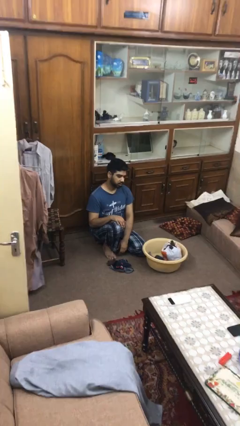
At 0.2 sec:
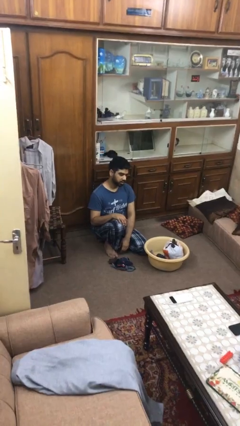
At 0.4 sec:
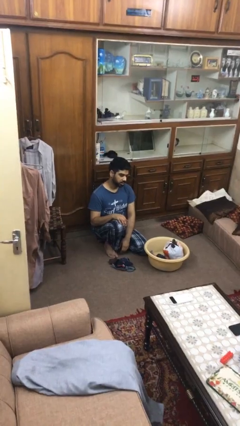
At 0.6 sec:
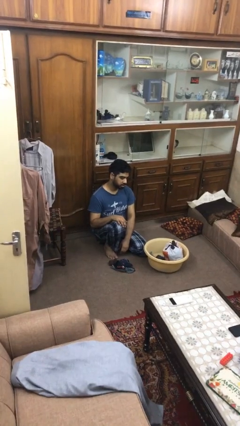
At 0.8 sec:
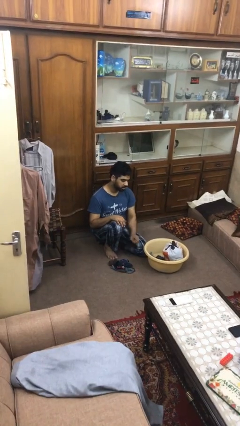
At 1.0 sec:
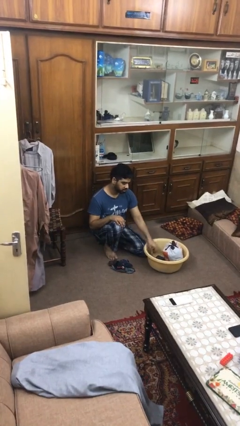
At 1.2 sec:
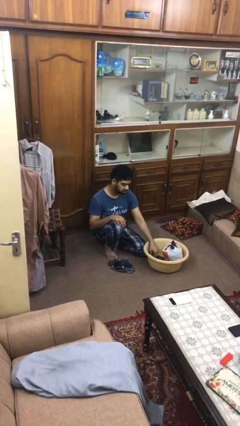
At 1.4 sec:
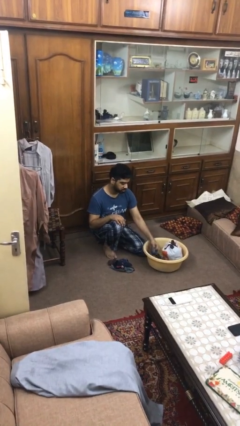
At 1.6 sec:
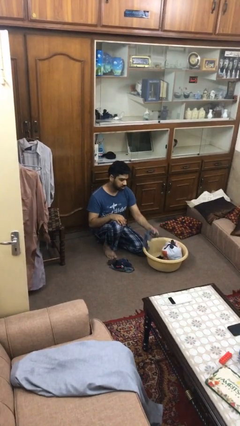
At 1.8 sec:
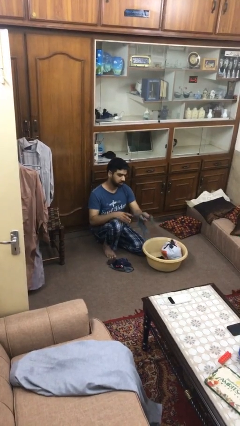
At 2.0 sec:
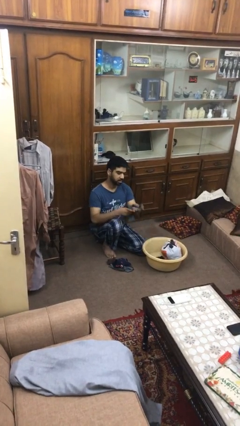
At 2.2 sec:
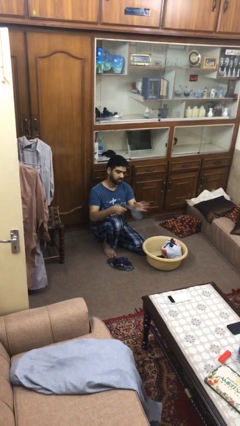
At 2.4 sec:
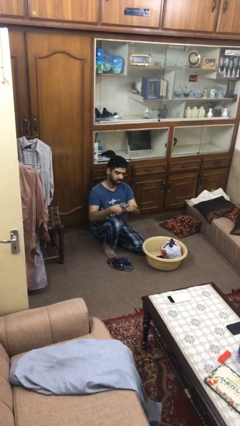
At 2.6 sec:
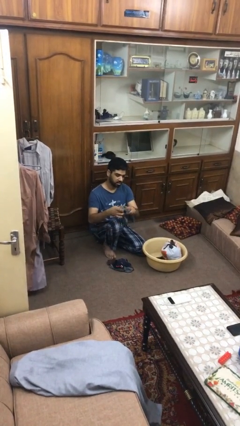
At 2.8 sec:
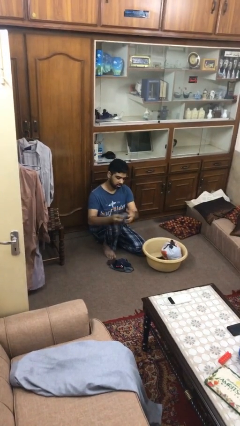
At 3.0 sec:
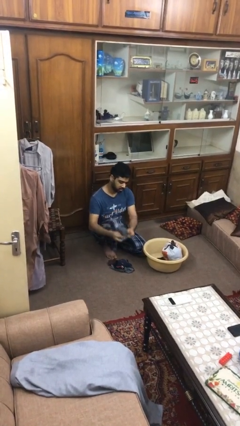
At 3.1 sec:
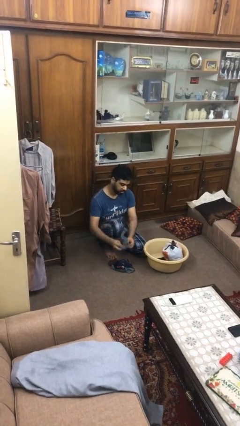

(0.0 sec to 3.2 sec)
person folds socks

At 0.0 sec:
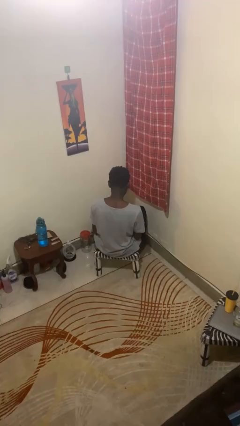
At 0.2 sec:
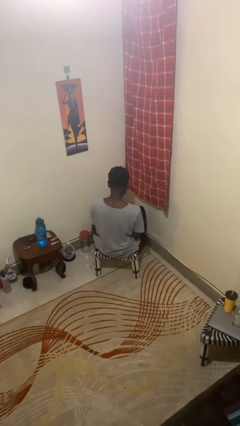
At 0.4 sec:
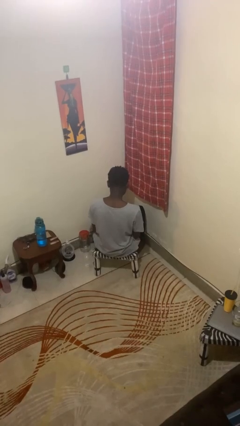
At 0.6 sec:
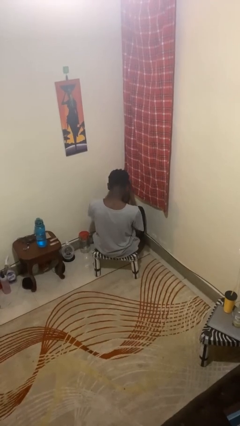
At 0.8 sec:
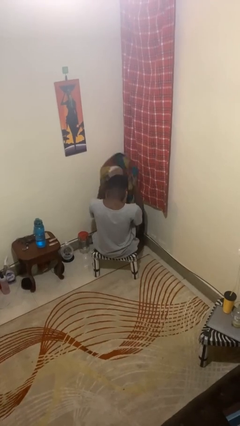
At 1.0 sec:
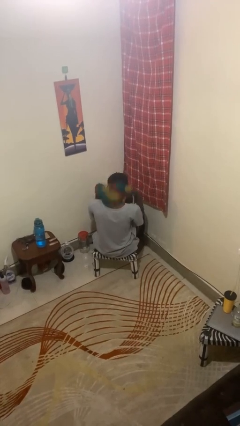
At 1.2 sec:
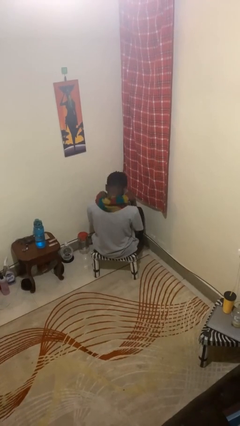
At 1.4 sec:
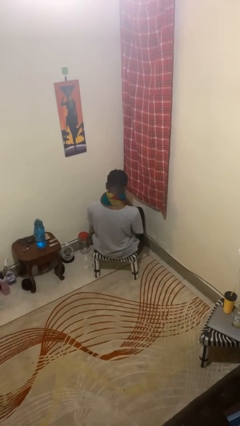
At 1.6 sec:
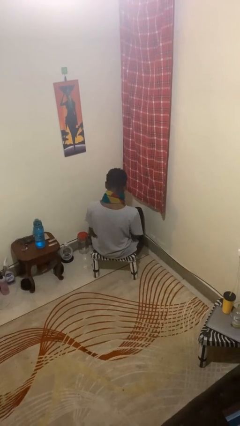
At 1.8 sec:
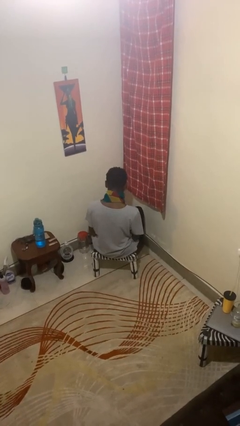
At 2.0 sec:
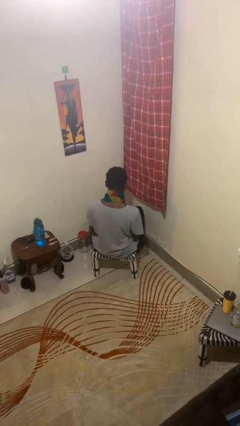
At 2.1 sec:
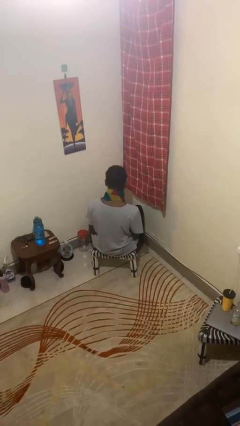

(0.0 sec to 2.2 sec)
person puts on scarf

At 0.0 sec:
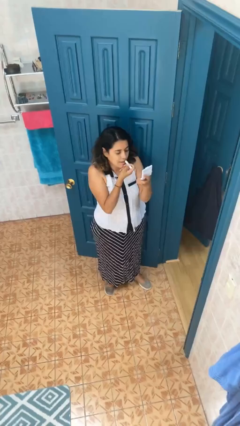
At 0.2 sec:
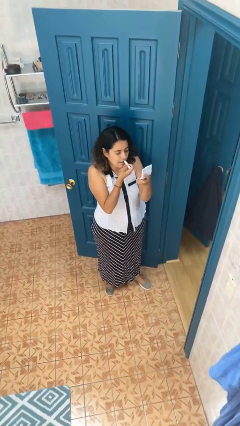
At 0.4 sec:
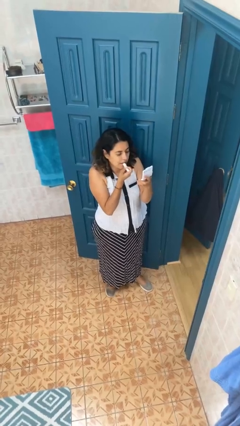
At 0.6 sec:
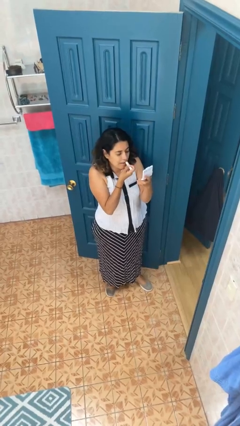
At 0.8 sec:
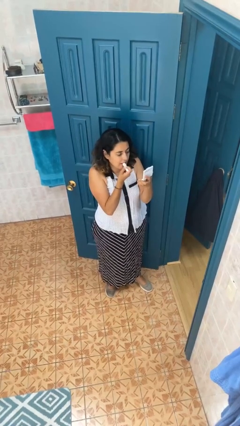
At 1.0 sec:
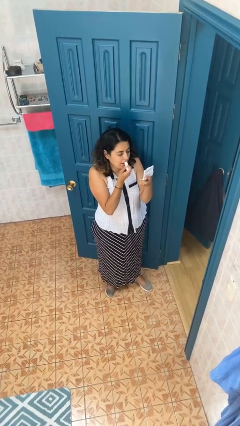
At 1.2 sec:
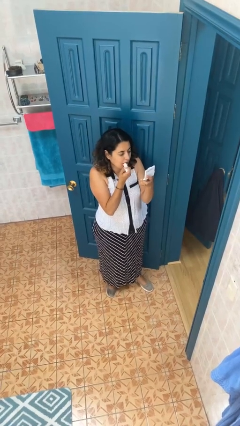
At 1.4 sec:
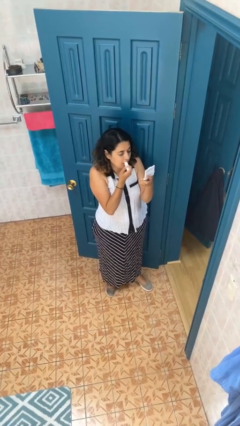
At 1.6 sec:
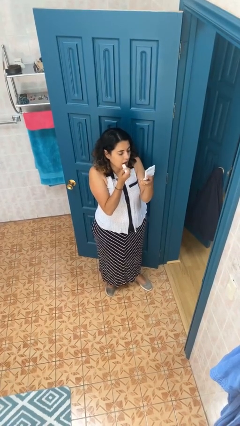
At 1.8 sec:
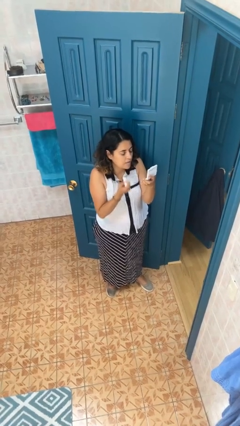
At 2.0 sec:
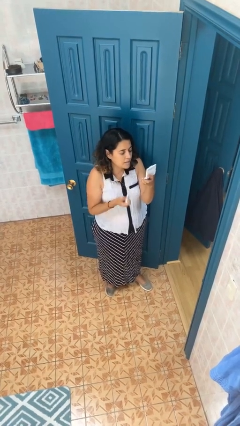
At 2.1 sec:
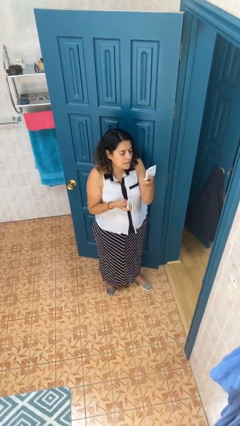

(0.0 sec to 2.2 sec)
person applies lip makeup

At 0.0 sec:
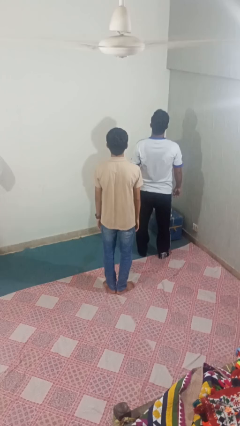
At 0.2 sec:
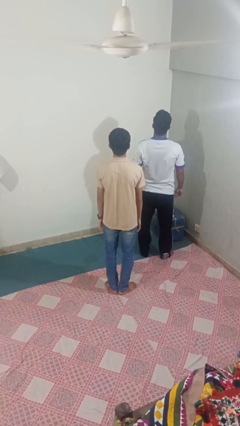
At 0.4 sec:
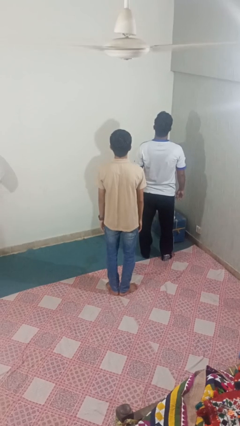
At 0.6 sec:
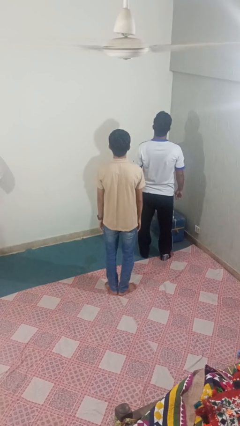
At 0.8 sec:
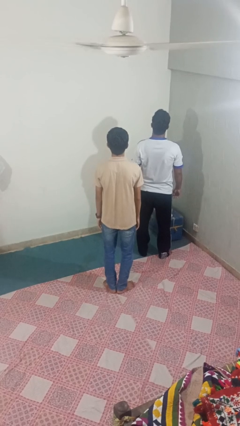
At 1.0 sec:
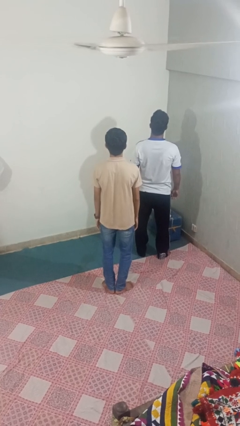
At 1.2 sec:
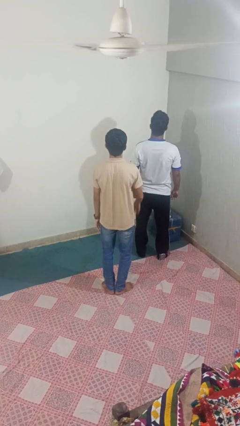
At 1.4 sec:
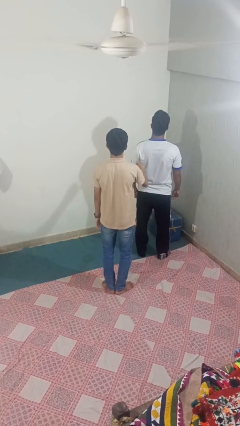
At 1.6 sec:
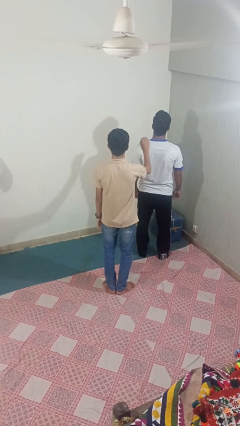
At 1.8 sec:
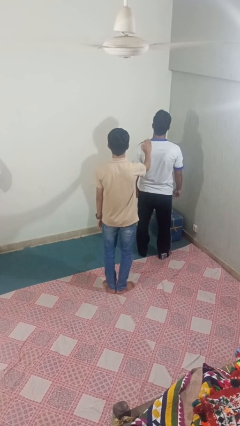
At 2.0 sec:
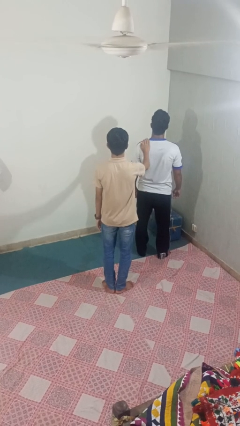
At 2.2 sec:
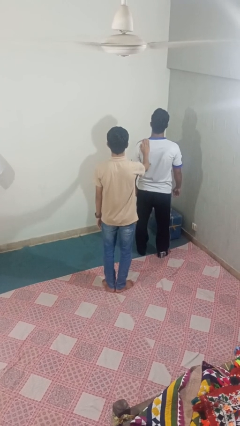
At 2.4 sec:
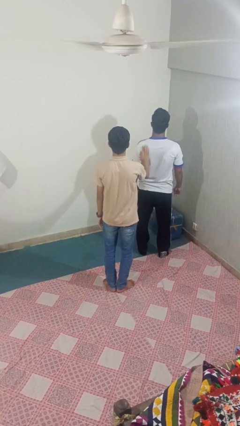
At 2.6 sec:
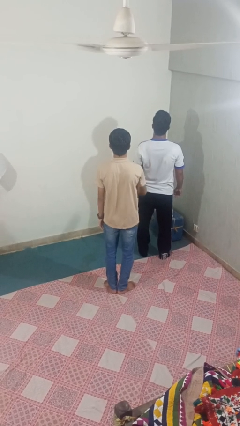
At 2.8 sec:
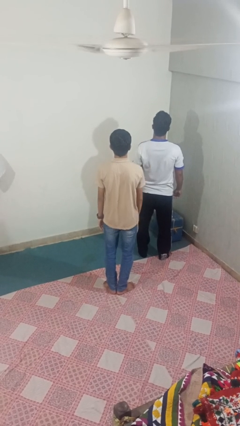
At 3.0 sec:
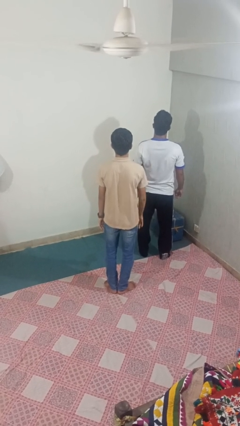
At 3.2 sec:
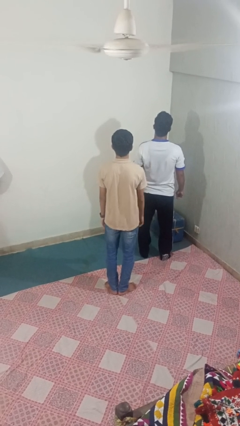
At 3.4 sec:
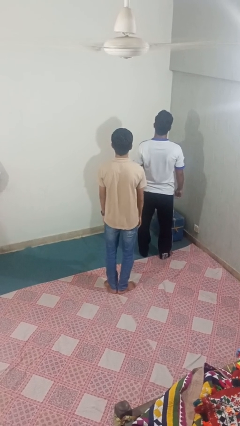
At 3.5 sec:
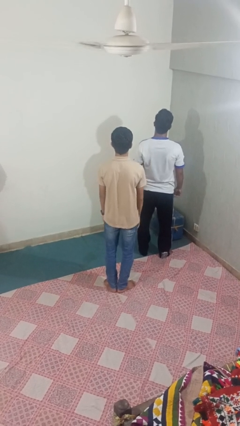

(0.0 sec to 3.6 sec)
person touches back of person

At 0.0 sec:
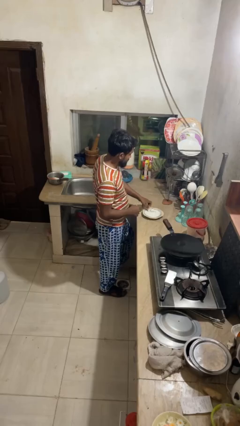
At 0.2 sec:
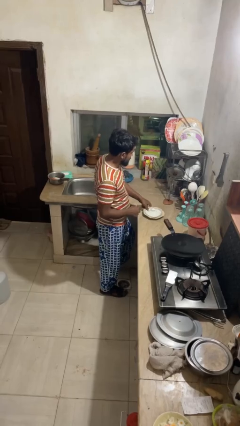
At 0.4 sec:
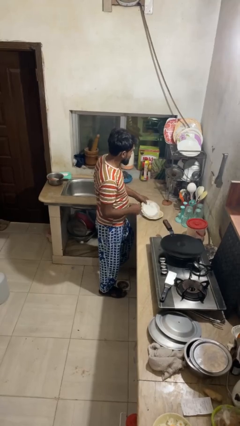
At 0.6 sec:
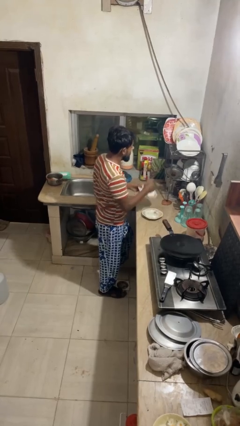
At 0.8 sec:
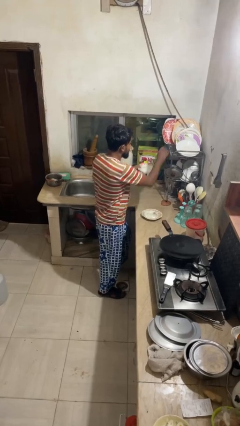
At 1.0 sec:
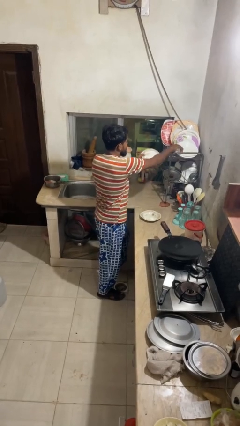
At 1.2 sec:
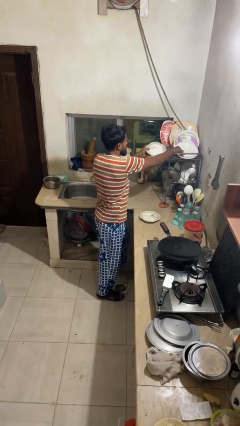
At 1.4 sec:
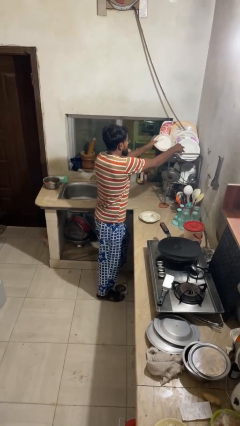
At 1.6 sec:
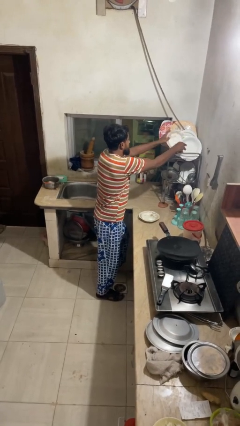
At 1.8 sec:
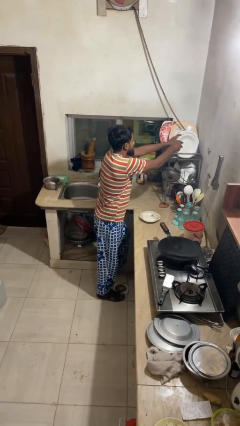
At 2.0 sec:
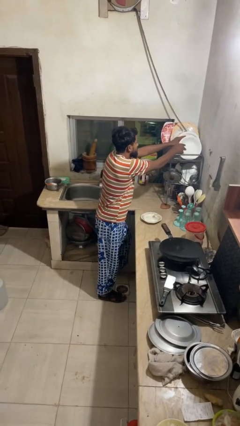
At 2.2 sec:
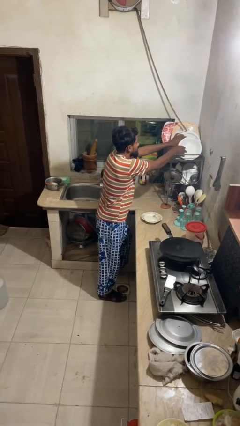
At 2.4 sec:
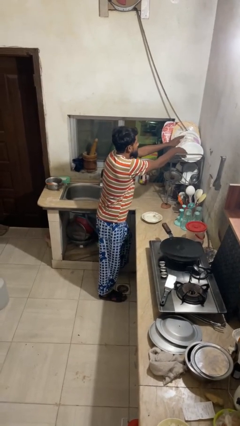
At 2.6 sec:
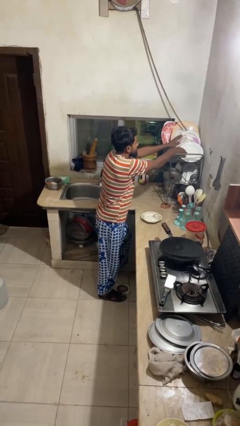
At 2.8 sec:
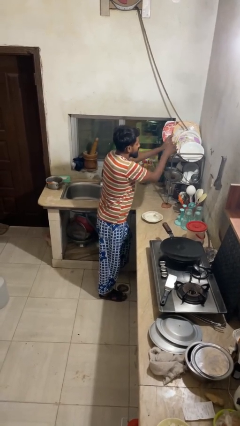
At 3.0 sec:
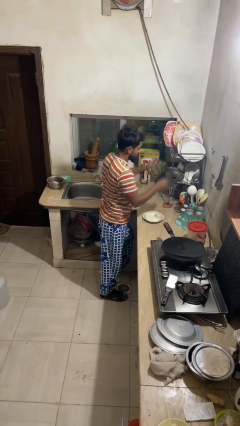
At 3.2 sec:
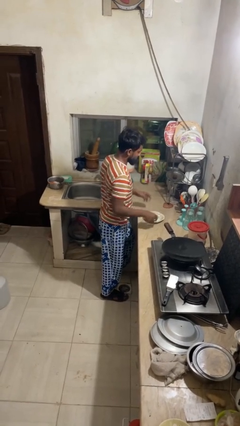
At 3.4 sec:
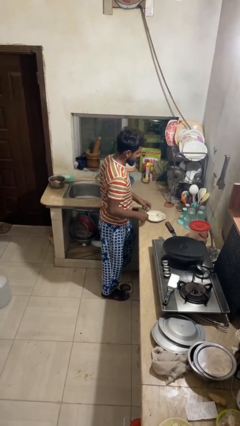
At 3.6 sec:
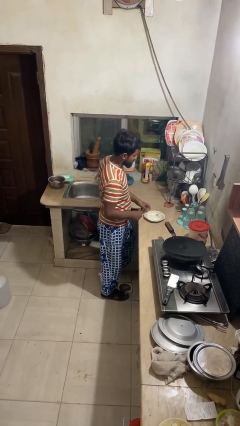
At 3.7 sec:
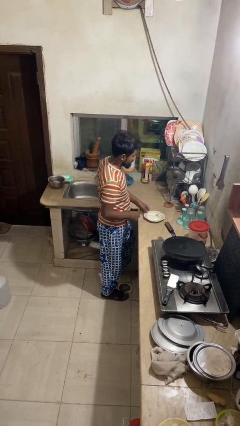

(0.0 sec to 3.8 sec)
person loads dishwasher

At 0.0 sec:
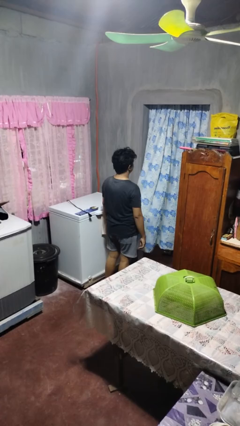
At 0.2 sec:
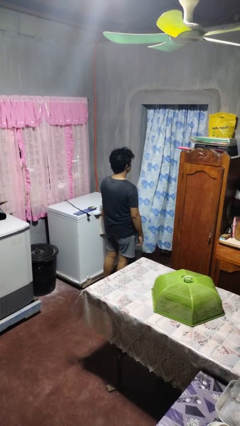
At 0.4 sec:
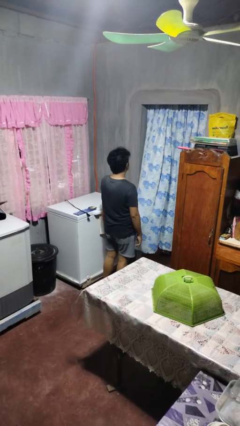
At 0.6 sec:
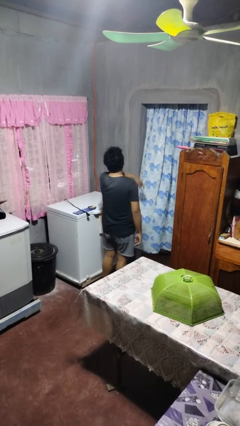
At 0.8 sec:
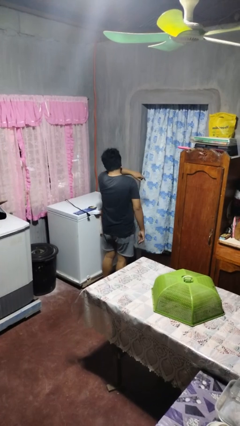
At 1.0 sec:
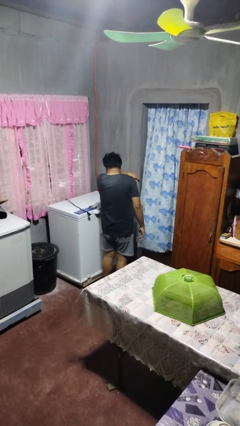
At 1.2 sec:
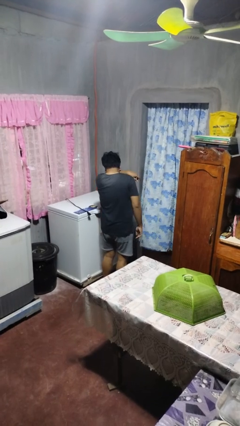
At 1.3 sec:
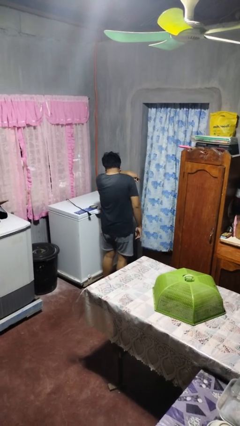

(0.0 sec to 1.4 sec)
person sneezes into arm

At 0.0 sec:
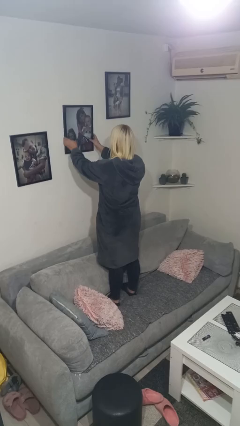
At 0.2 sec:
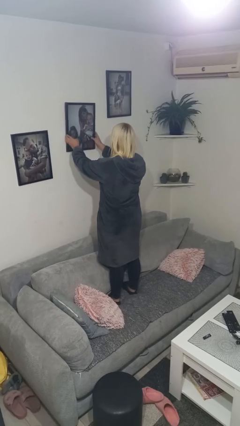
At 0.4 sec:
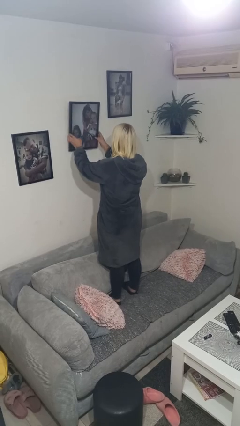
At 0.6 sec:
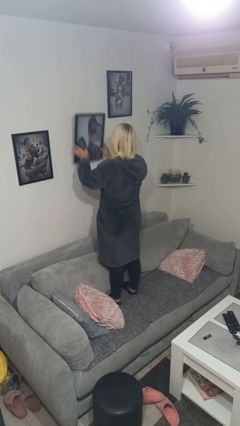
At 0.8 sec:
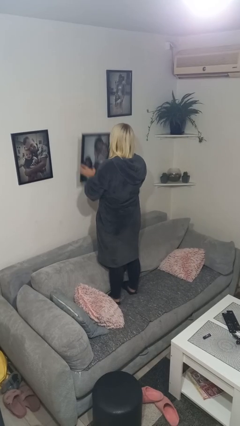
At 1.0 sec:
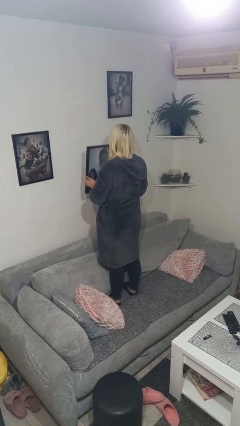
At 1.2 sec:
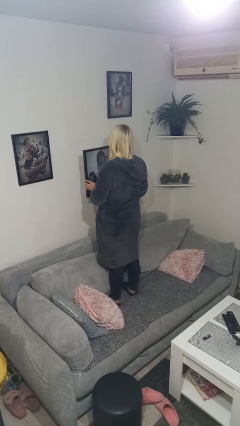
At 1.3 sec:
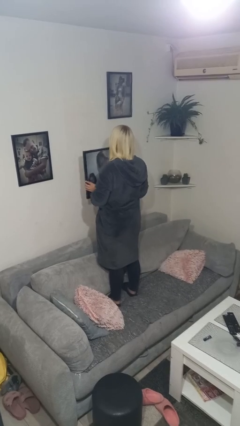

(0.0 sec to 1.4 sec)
person takes down picture frame
